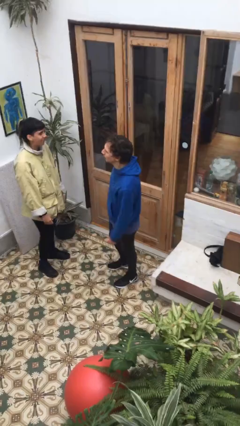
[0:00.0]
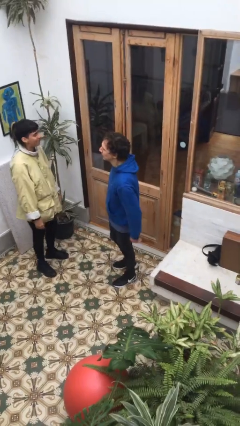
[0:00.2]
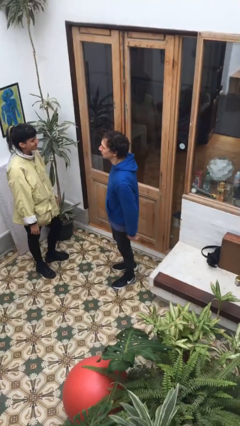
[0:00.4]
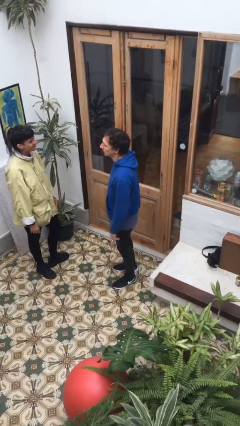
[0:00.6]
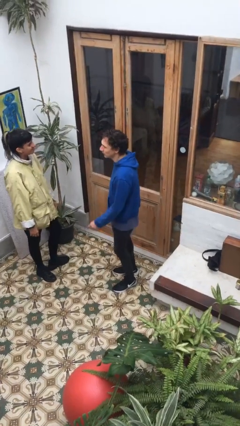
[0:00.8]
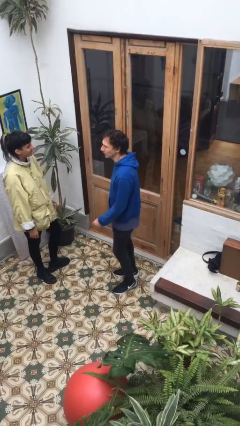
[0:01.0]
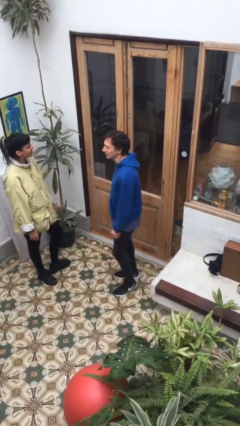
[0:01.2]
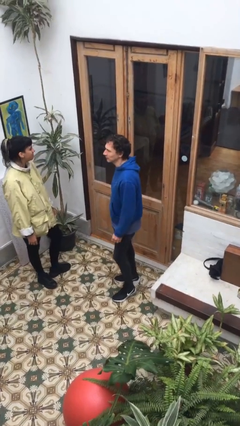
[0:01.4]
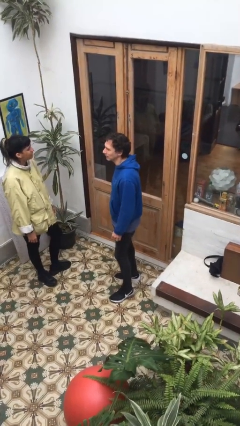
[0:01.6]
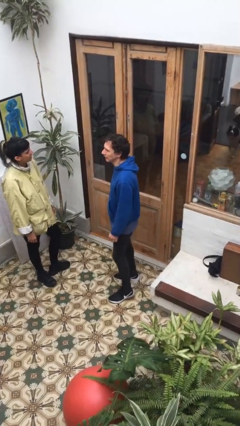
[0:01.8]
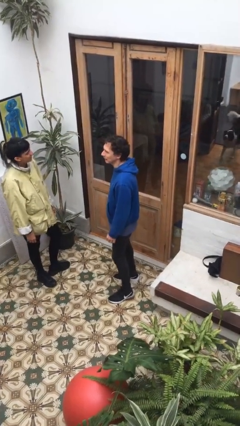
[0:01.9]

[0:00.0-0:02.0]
person talks to person

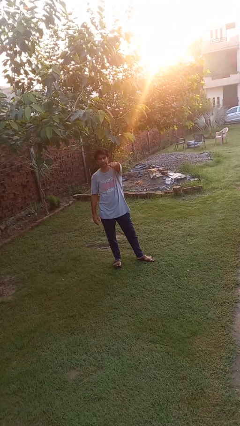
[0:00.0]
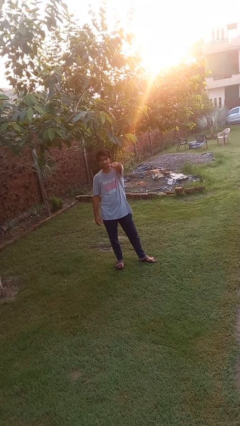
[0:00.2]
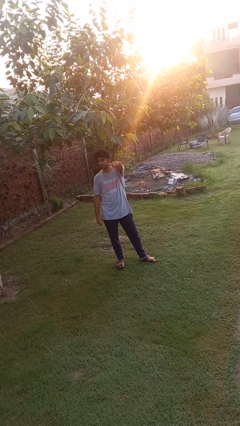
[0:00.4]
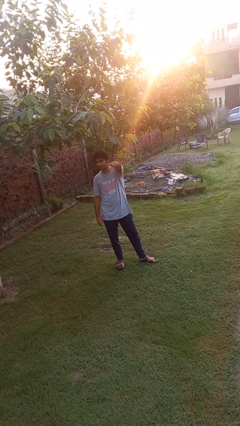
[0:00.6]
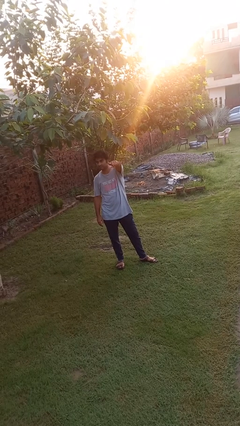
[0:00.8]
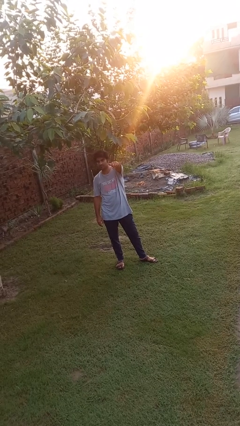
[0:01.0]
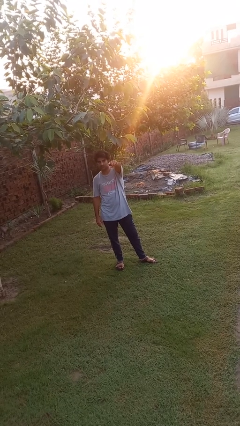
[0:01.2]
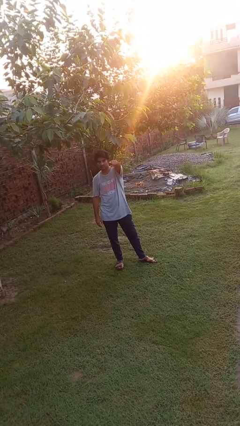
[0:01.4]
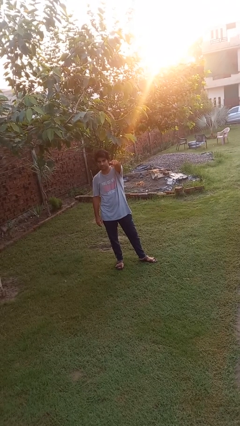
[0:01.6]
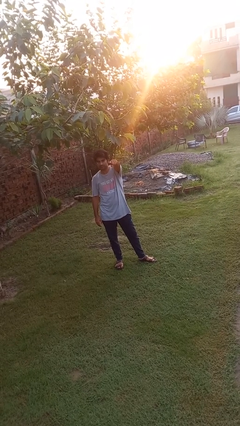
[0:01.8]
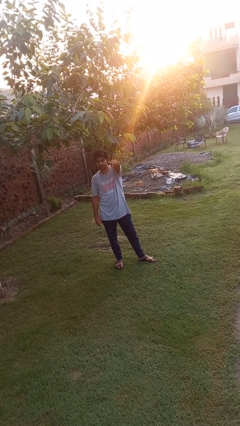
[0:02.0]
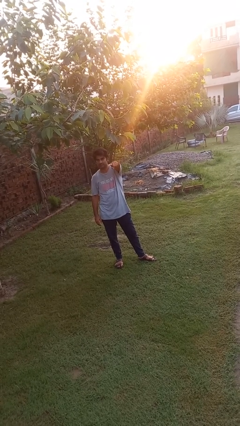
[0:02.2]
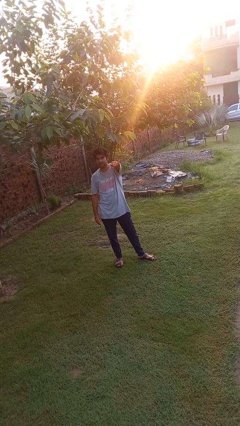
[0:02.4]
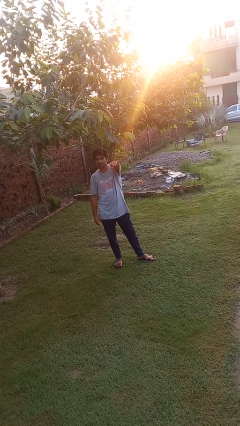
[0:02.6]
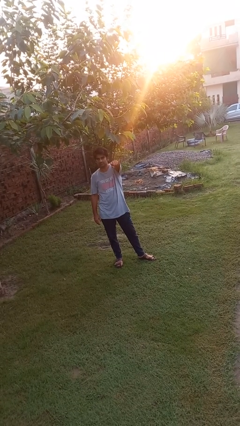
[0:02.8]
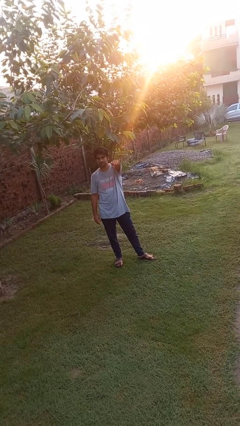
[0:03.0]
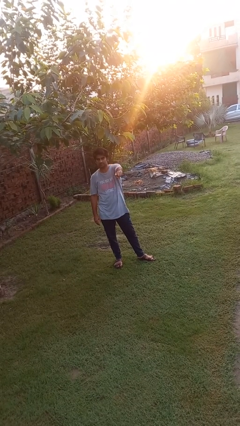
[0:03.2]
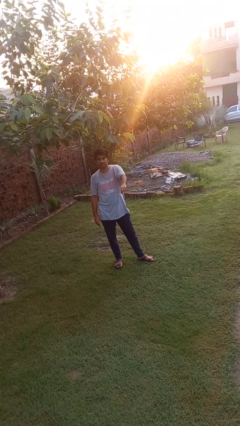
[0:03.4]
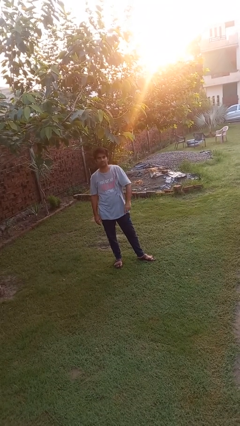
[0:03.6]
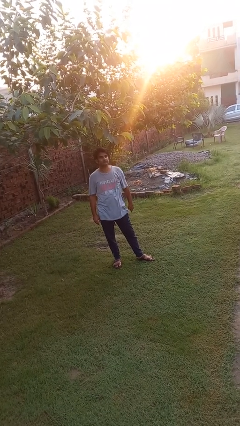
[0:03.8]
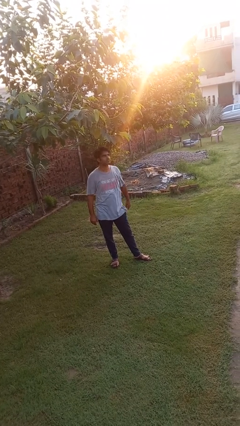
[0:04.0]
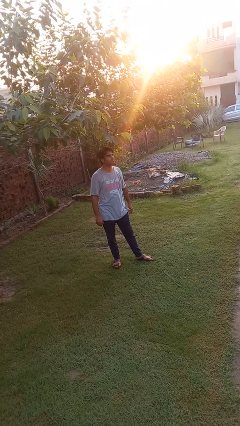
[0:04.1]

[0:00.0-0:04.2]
person points at person

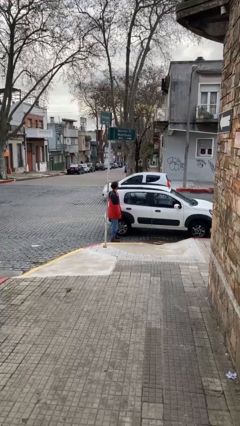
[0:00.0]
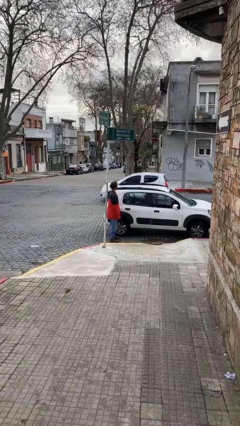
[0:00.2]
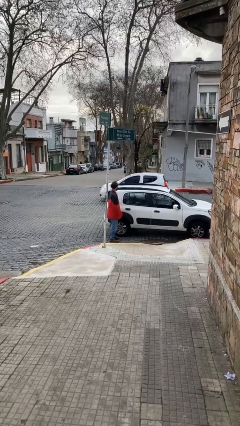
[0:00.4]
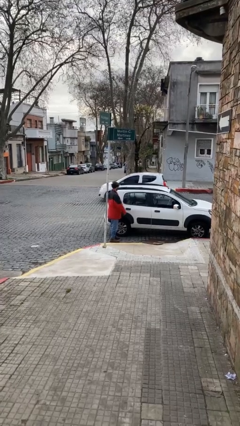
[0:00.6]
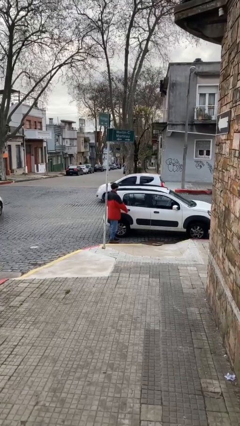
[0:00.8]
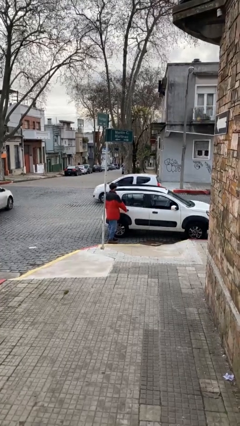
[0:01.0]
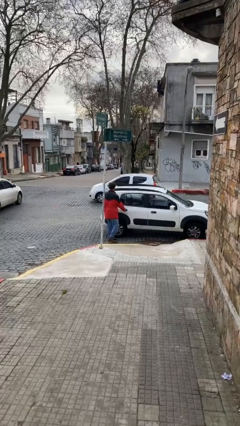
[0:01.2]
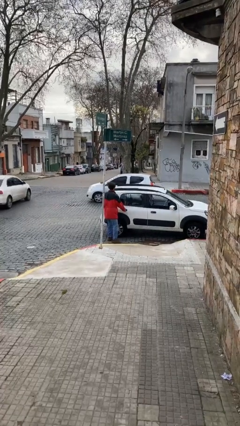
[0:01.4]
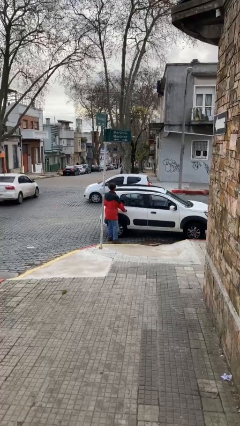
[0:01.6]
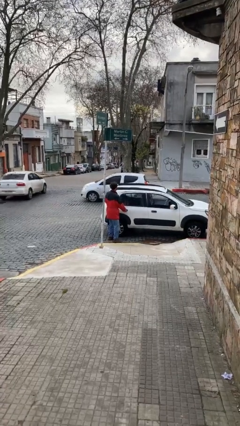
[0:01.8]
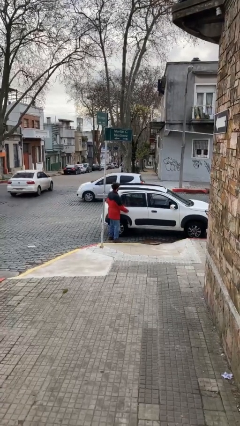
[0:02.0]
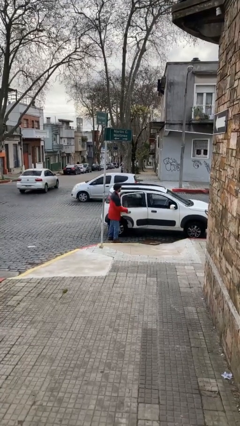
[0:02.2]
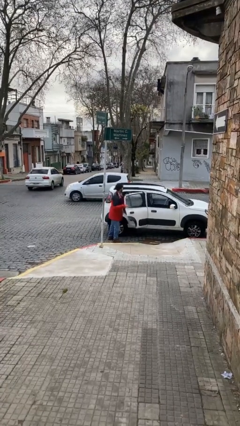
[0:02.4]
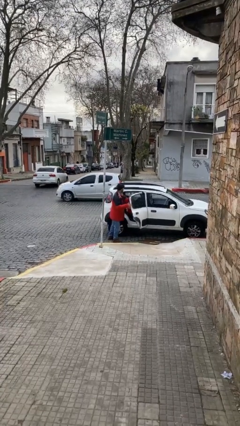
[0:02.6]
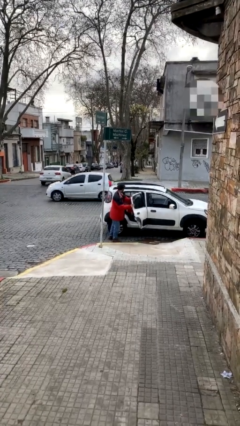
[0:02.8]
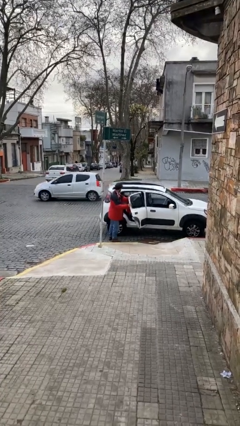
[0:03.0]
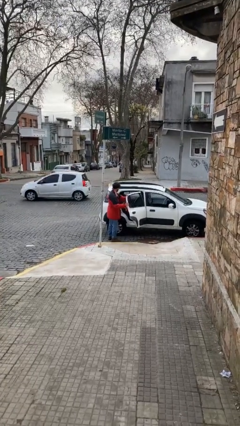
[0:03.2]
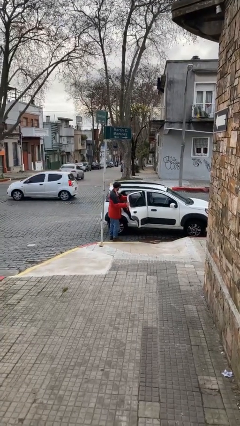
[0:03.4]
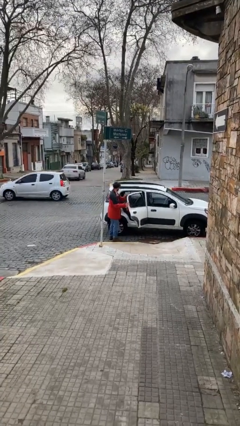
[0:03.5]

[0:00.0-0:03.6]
person opens car door

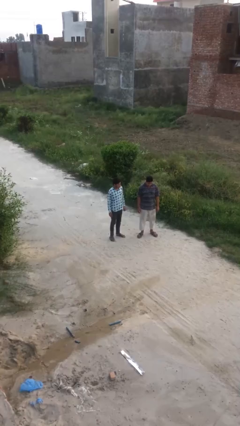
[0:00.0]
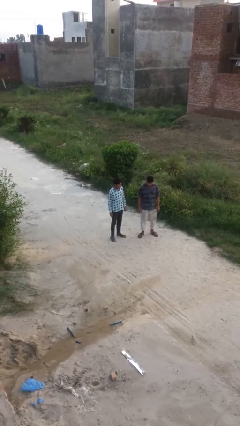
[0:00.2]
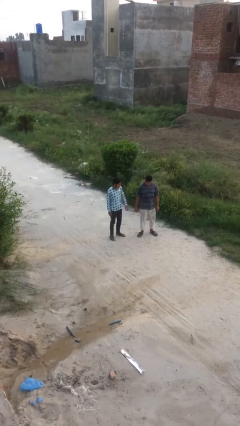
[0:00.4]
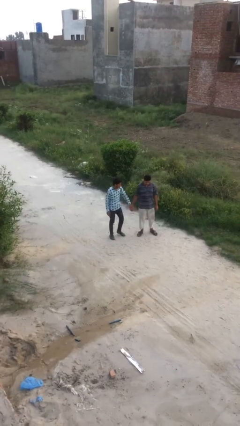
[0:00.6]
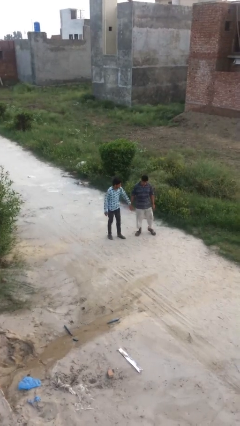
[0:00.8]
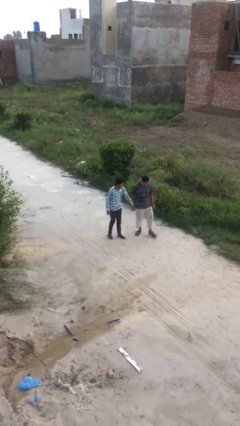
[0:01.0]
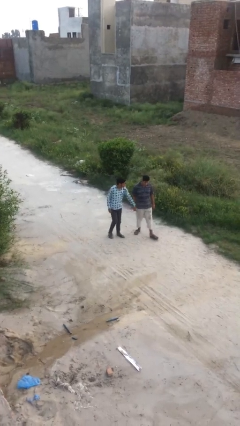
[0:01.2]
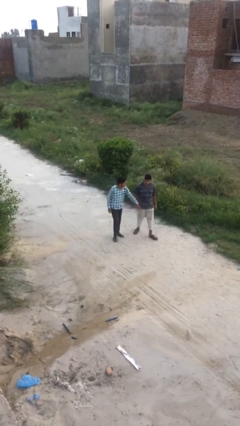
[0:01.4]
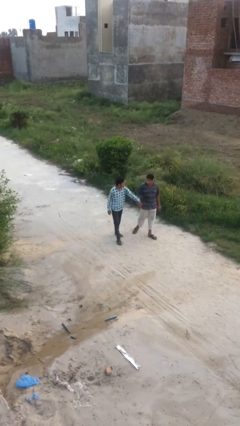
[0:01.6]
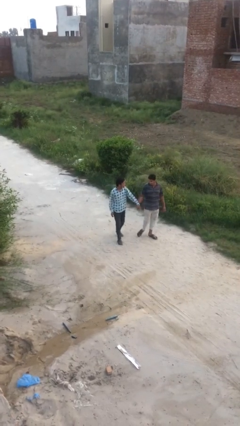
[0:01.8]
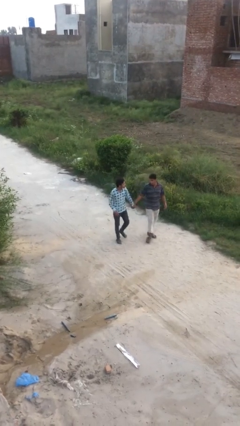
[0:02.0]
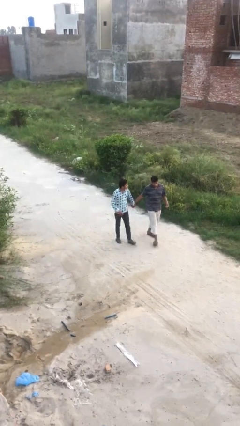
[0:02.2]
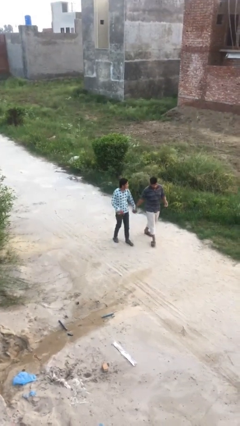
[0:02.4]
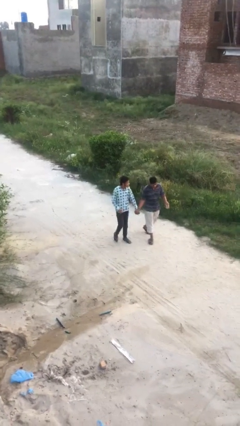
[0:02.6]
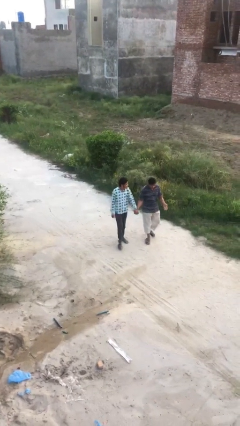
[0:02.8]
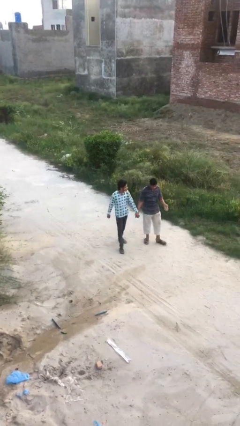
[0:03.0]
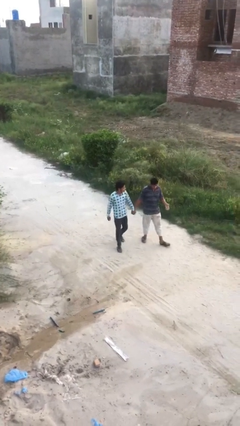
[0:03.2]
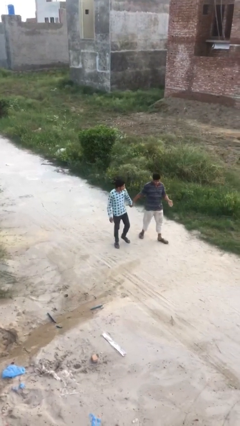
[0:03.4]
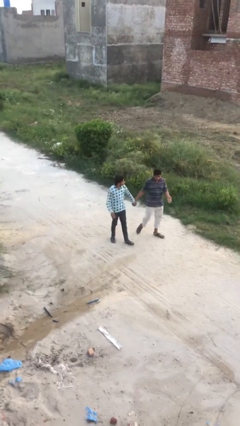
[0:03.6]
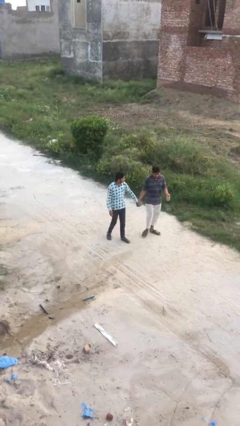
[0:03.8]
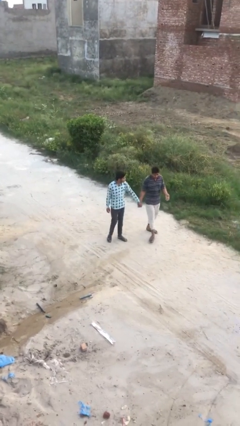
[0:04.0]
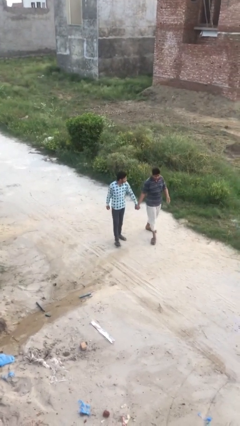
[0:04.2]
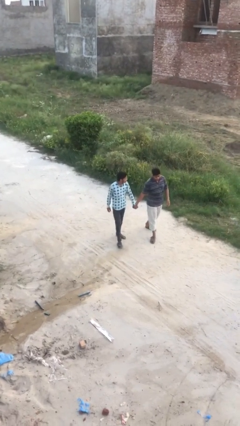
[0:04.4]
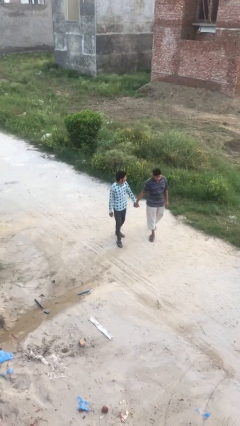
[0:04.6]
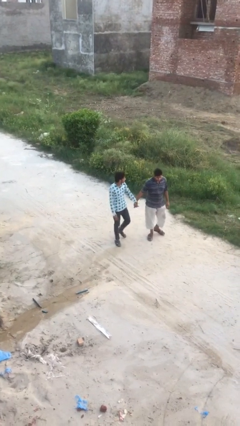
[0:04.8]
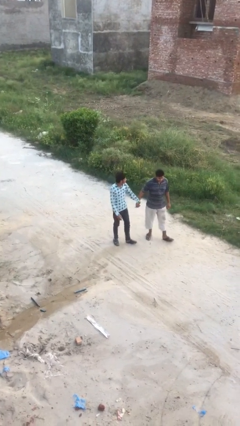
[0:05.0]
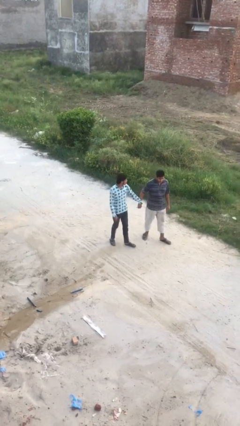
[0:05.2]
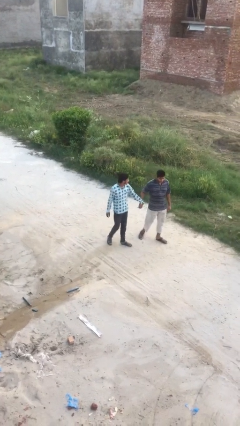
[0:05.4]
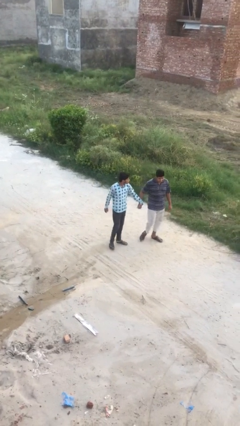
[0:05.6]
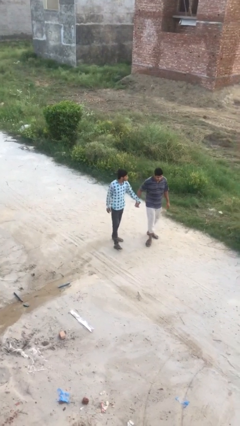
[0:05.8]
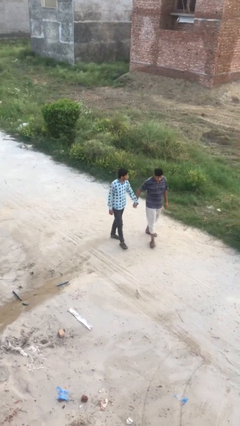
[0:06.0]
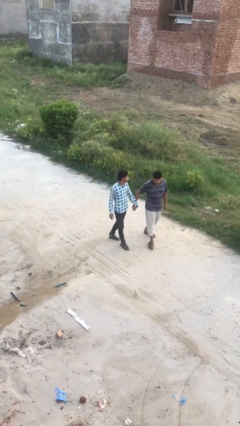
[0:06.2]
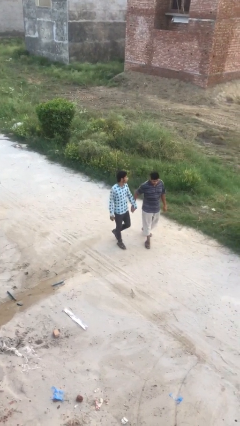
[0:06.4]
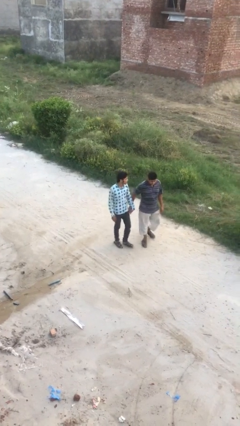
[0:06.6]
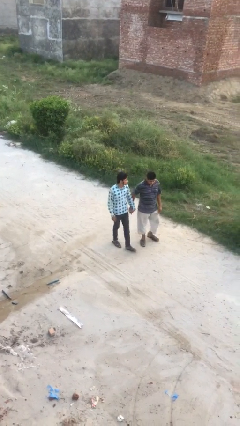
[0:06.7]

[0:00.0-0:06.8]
person holds hand

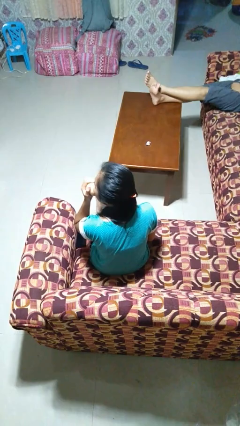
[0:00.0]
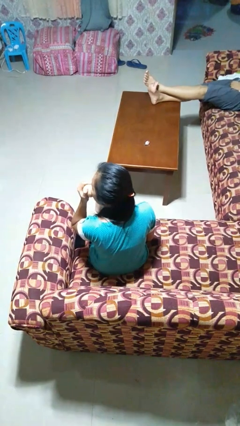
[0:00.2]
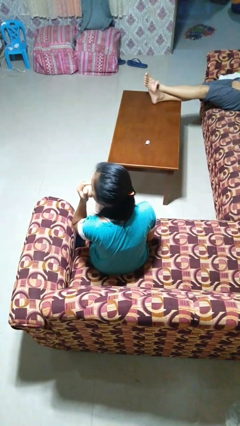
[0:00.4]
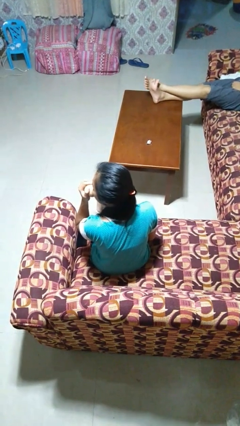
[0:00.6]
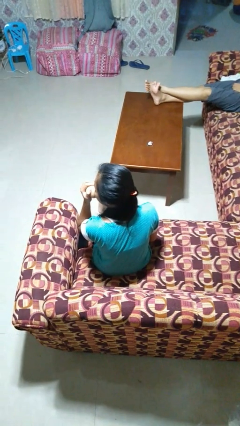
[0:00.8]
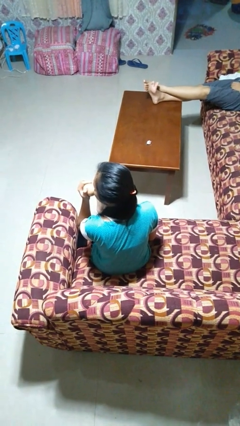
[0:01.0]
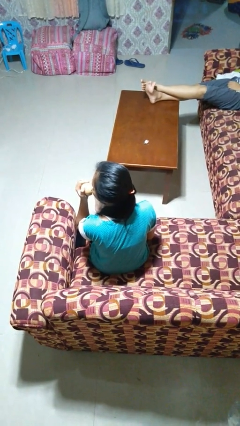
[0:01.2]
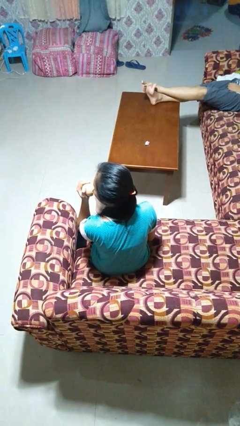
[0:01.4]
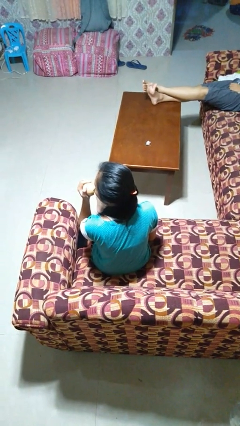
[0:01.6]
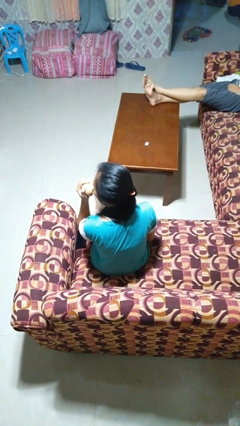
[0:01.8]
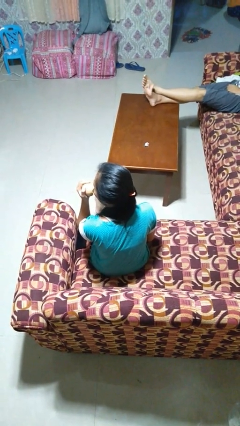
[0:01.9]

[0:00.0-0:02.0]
person eats apple
